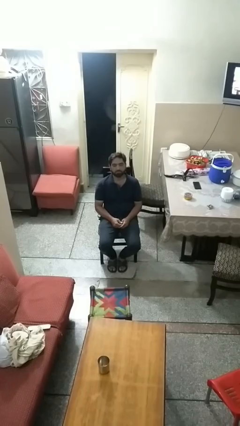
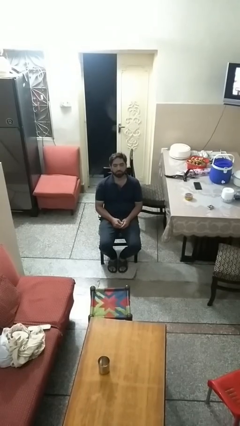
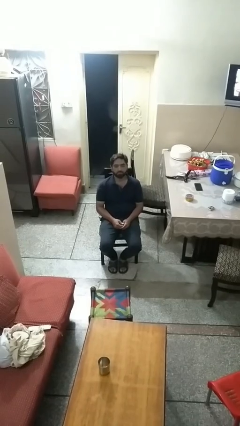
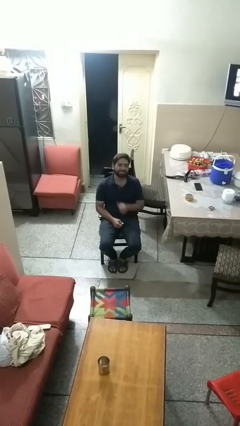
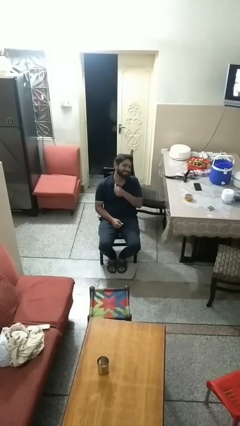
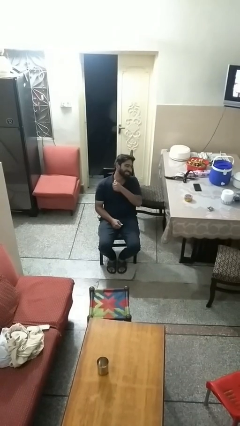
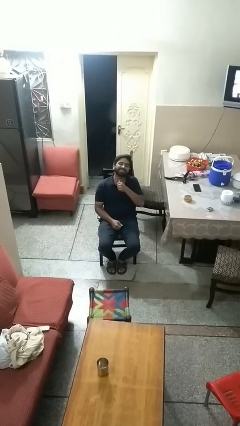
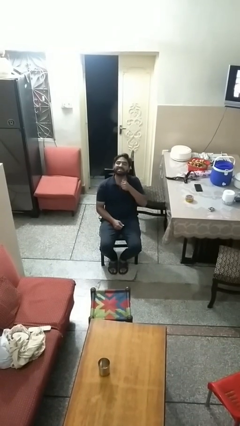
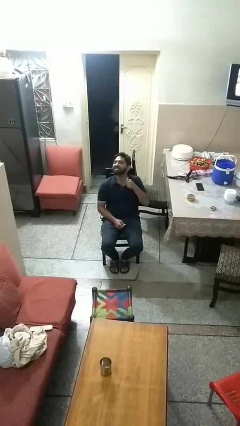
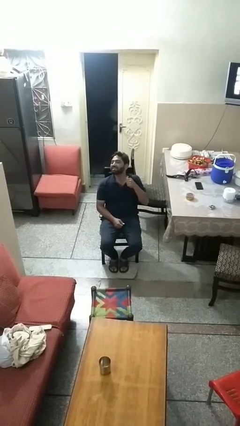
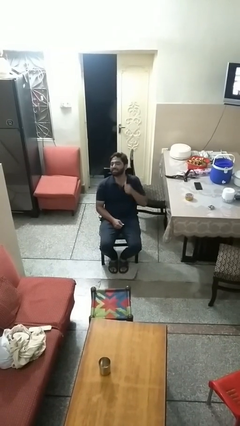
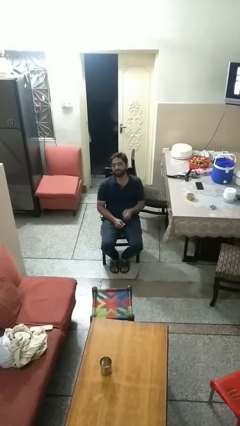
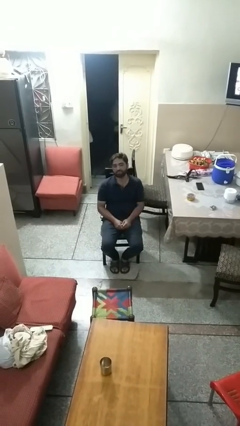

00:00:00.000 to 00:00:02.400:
person gestures cut

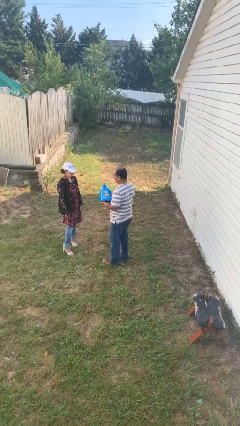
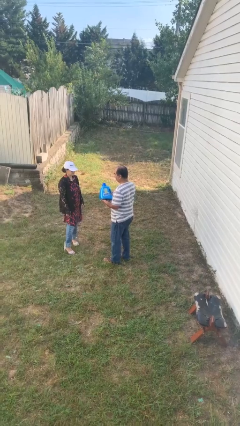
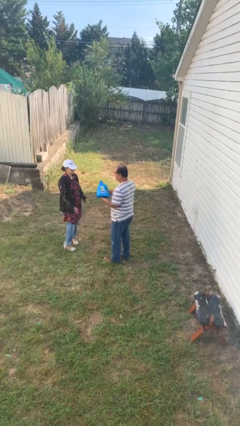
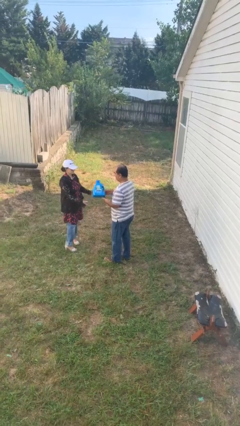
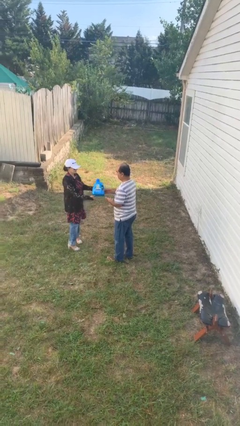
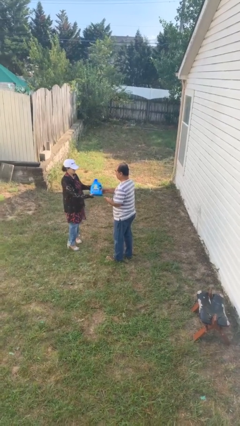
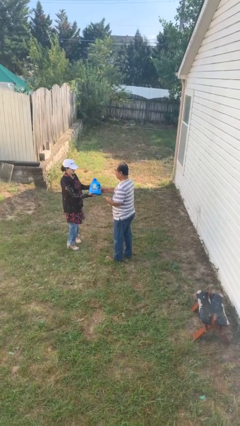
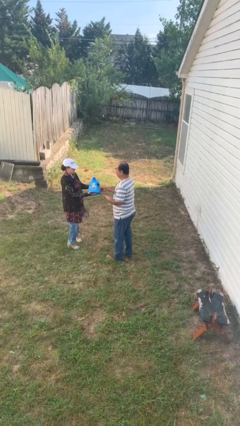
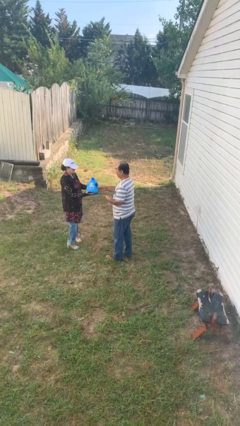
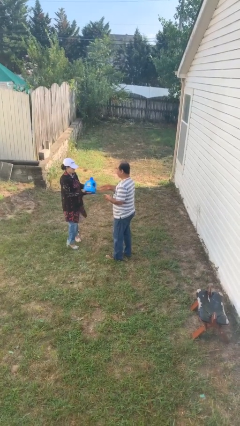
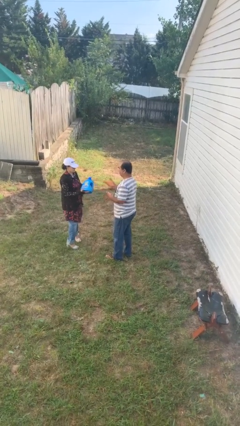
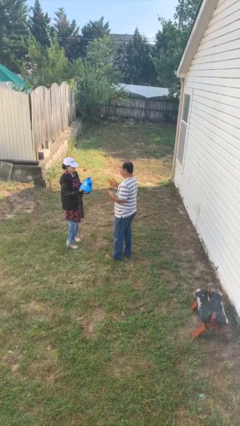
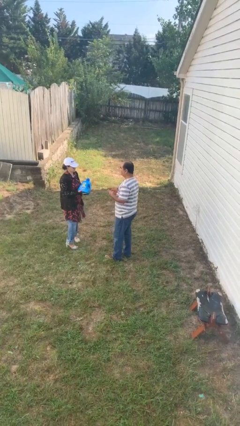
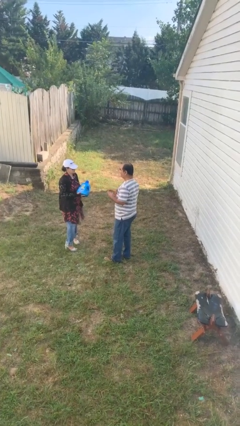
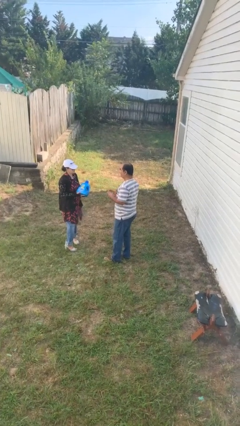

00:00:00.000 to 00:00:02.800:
person transfers object to person

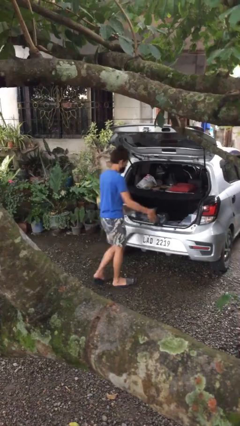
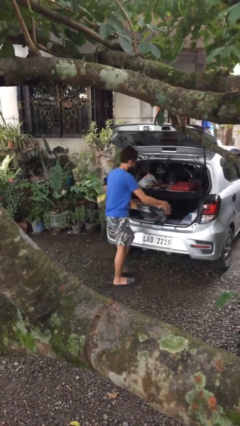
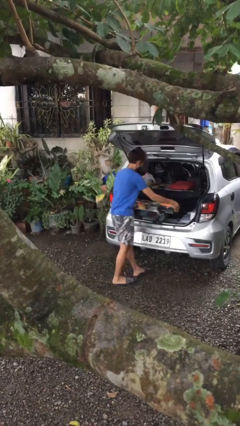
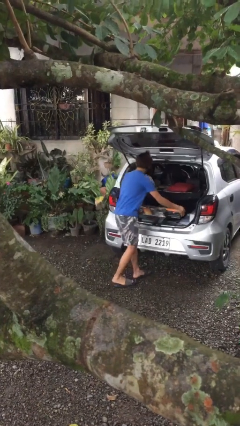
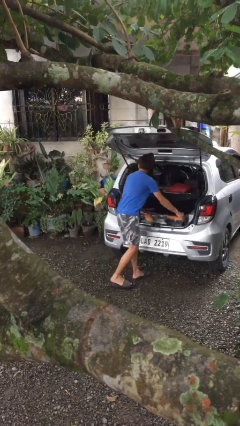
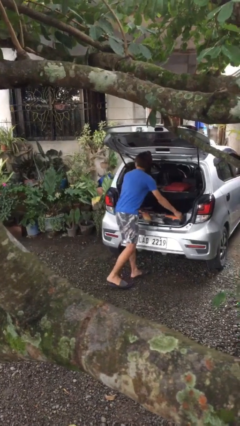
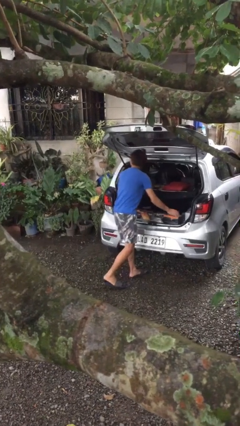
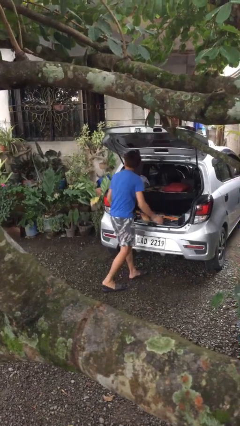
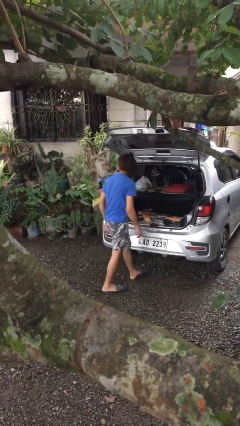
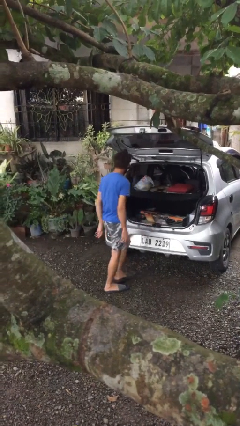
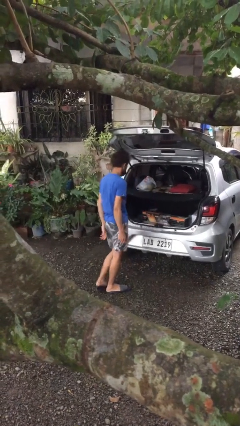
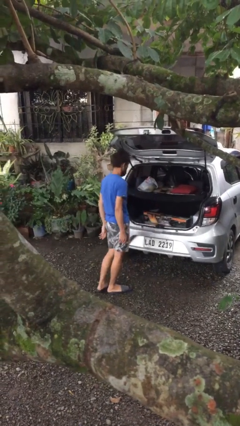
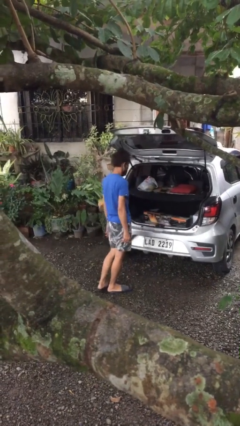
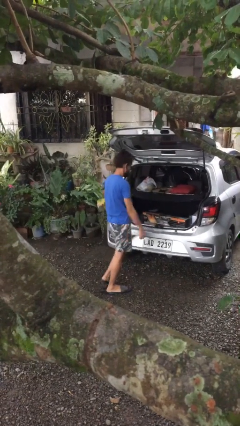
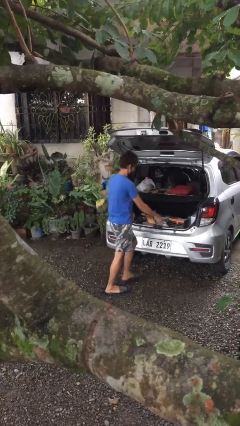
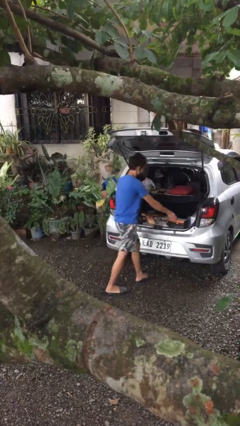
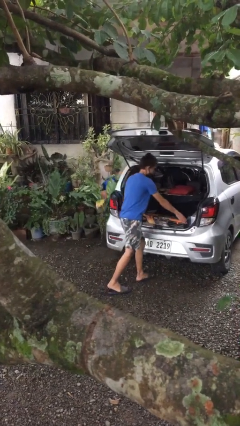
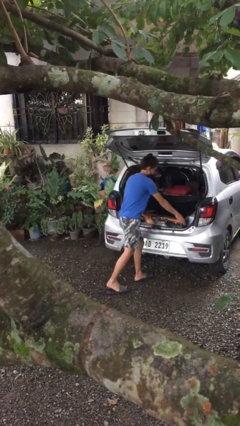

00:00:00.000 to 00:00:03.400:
person loads car

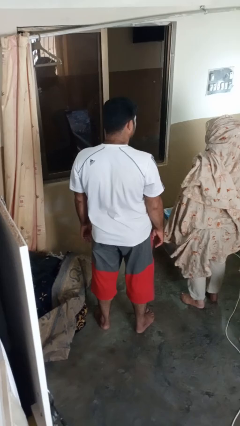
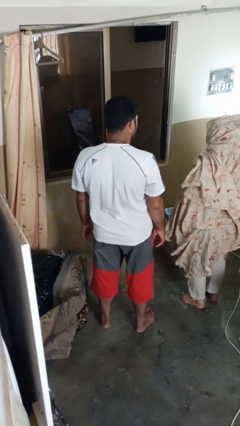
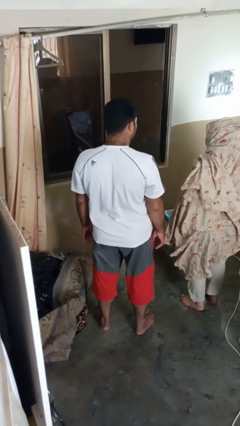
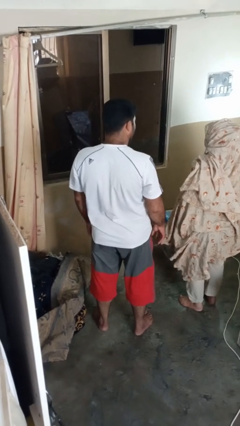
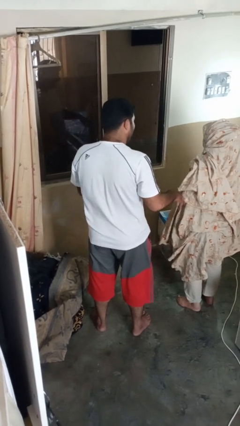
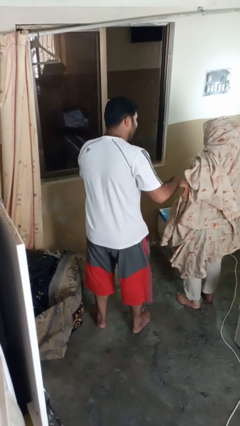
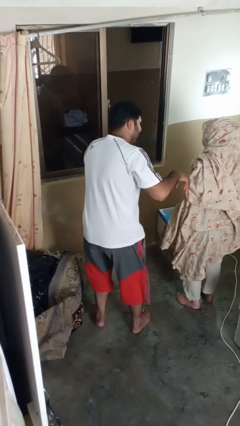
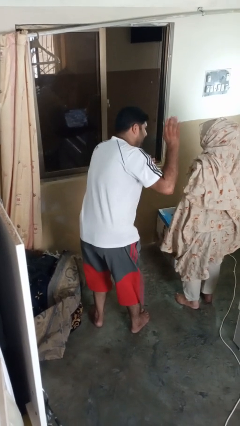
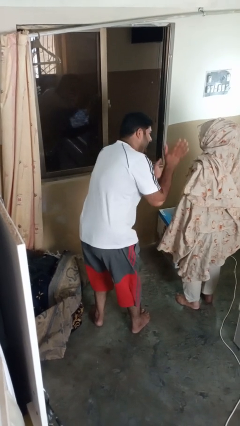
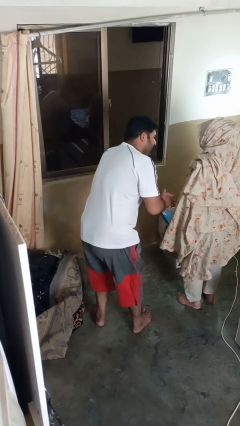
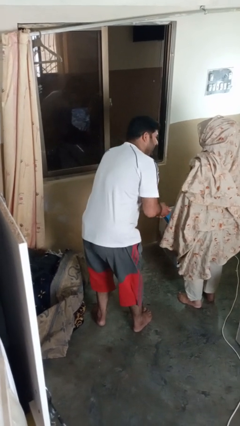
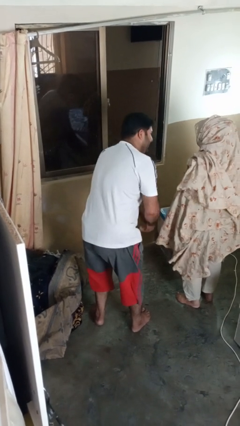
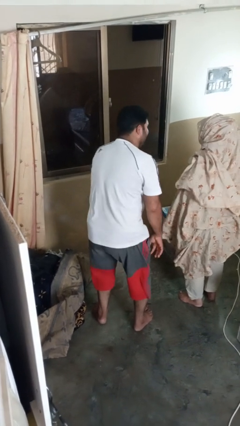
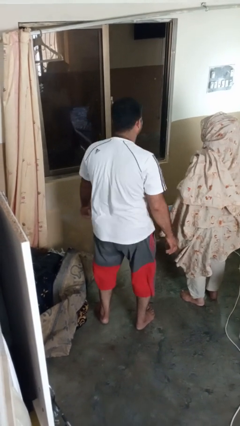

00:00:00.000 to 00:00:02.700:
person laughs with person

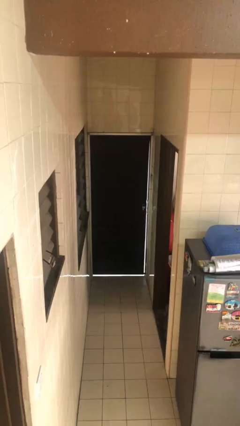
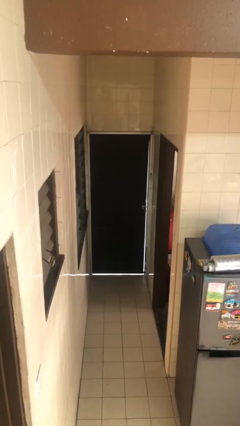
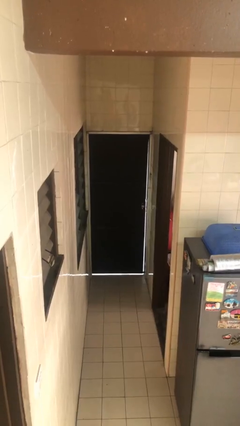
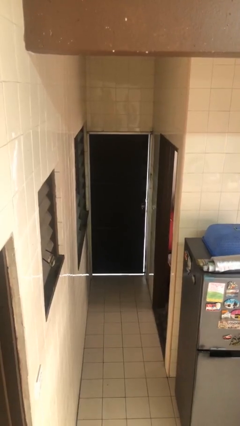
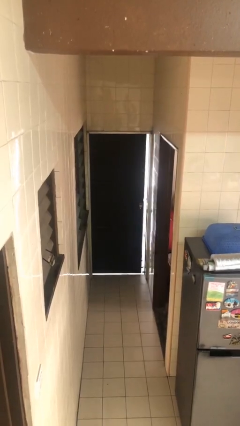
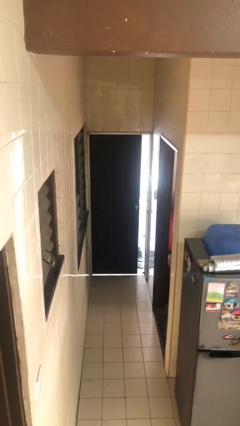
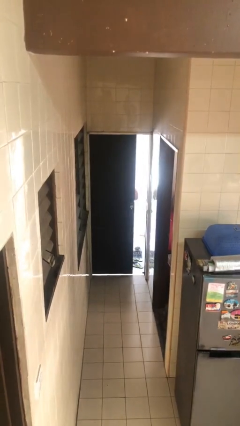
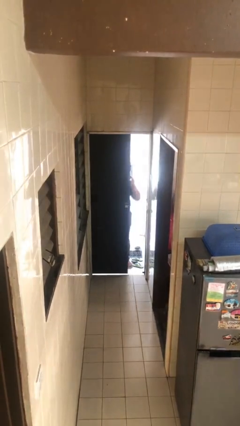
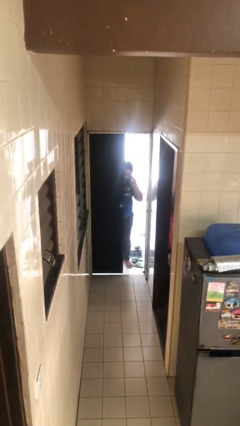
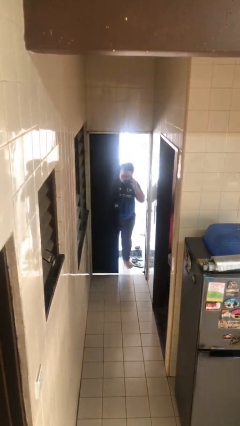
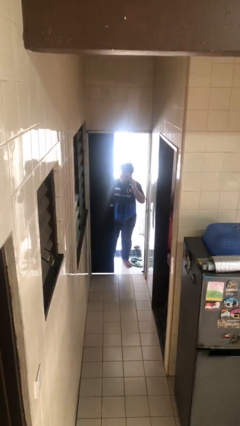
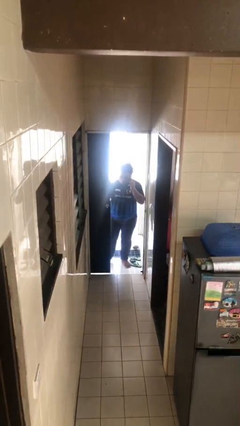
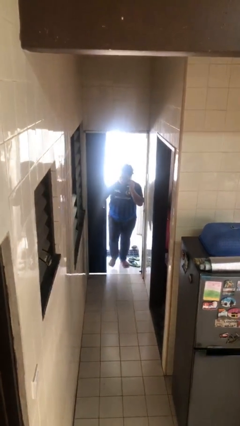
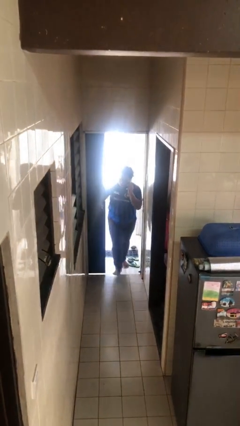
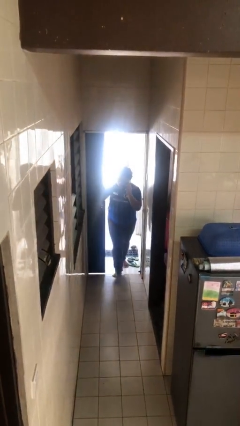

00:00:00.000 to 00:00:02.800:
person opens facility door

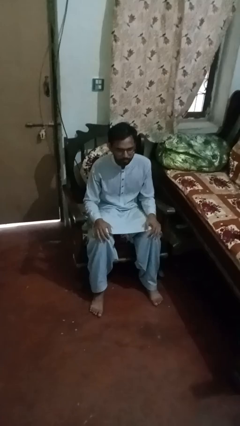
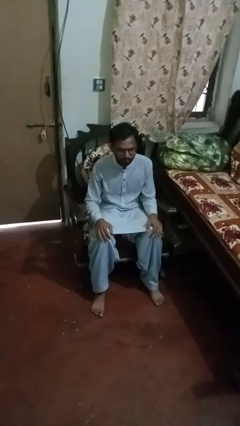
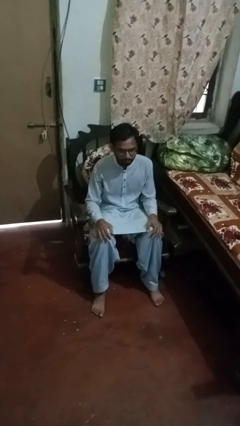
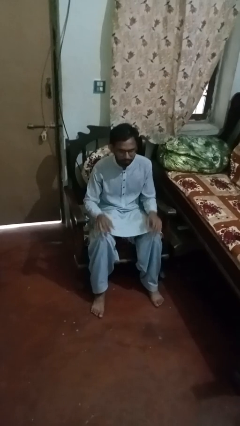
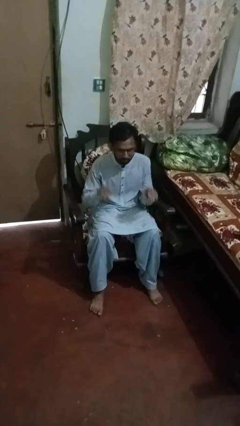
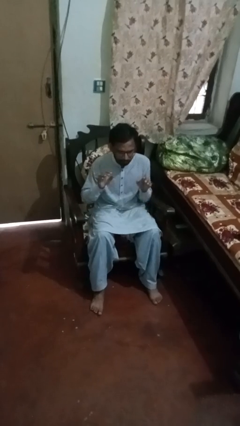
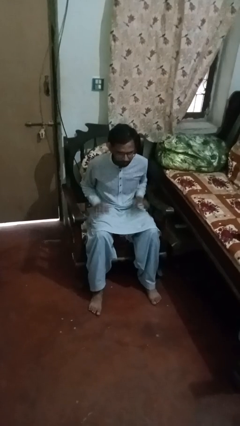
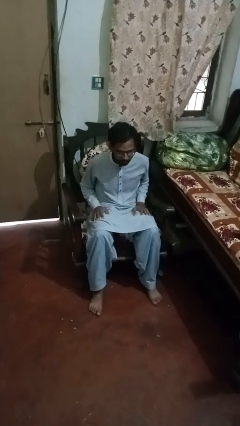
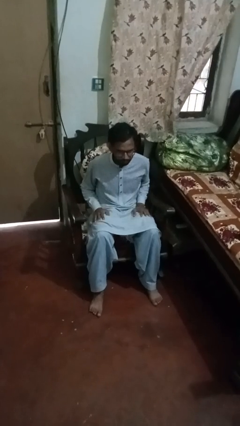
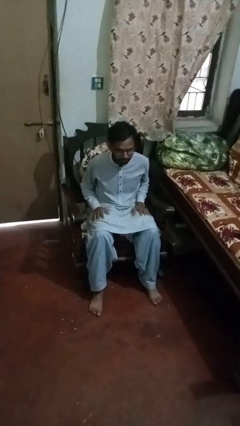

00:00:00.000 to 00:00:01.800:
person slaps hands on thighs

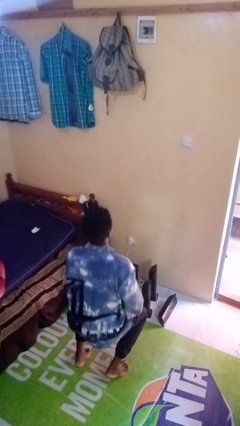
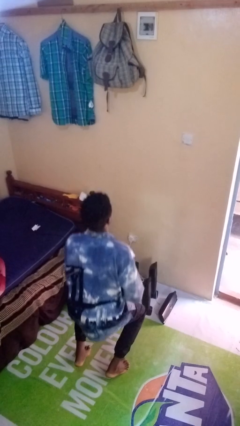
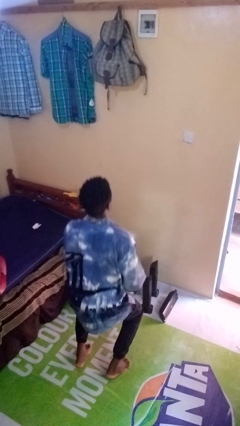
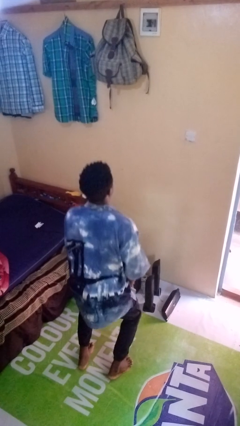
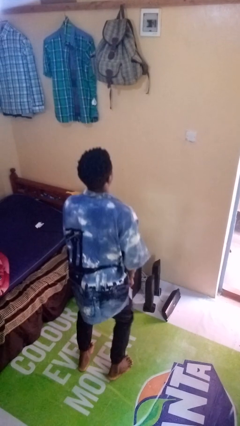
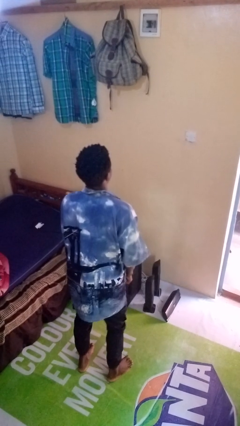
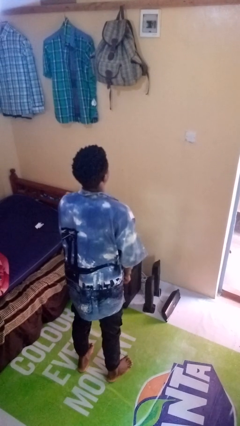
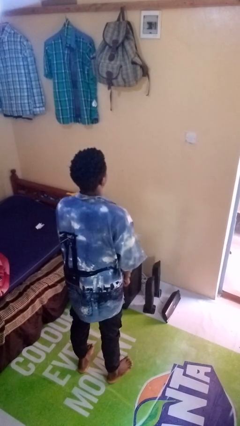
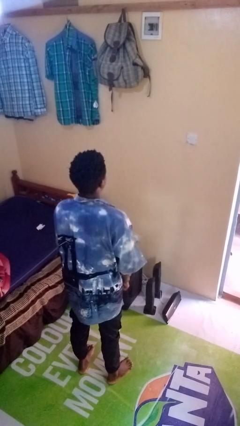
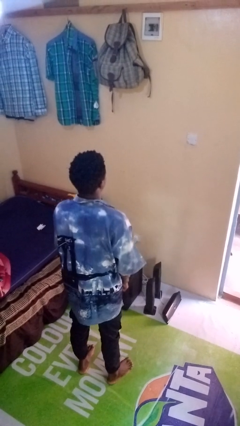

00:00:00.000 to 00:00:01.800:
person stands up
